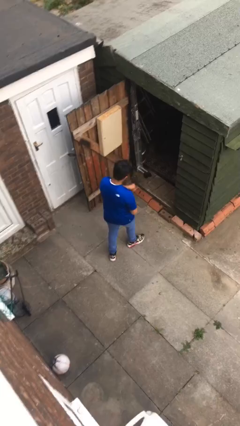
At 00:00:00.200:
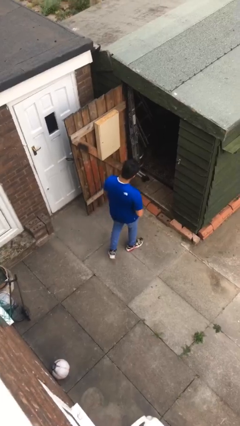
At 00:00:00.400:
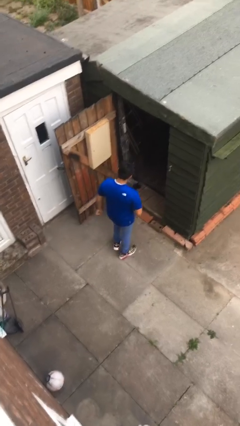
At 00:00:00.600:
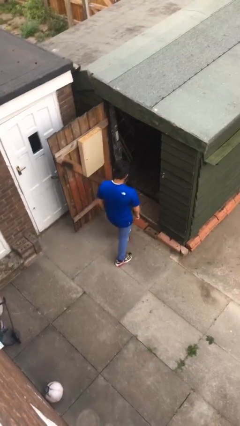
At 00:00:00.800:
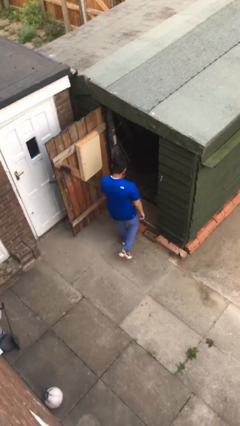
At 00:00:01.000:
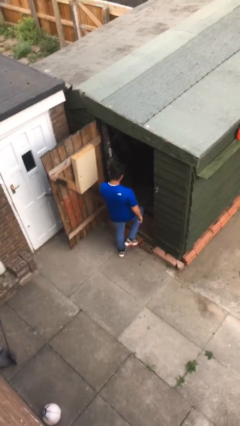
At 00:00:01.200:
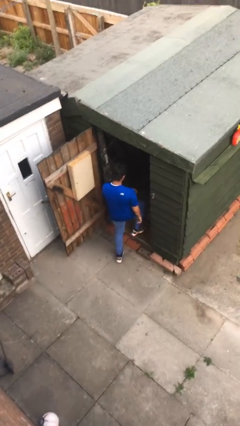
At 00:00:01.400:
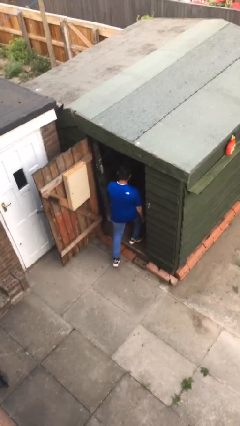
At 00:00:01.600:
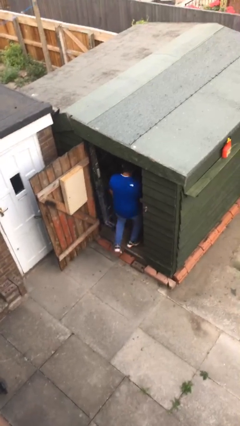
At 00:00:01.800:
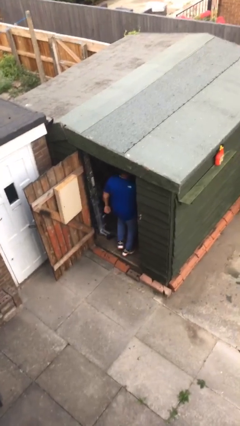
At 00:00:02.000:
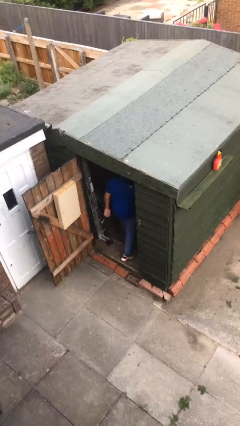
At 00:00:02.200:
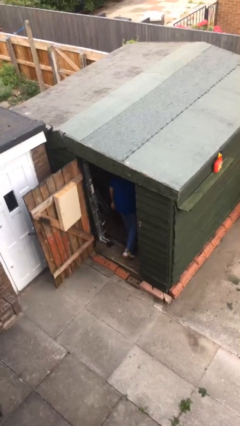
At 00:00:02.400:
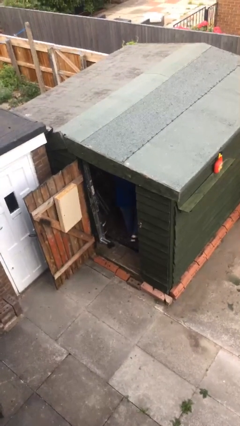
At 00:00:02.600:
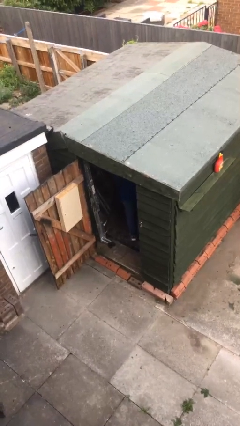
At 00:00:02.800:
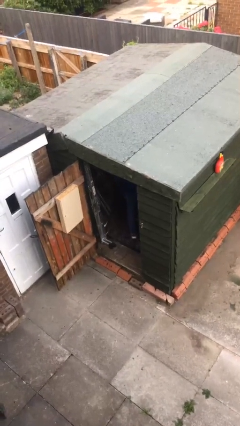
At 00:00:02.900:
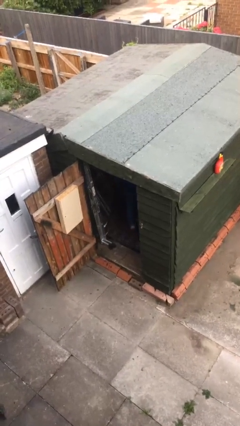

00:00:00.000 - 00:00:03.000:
person exits scene through structure

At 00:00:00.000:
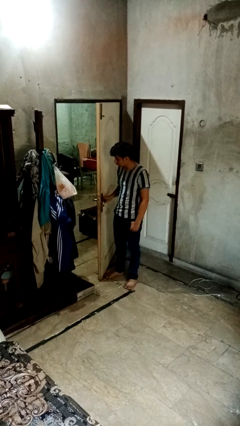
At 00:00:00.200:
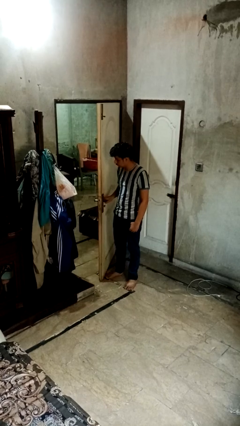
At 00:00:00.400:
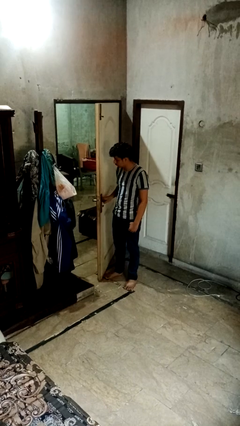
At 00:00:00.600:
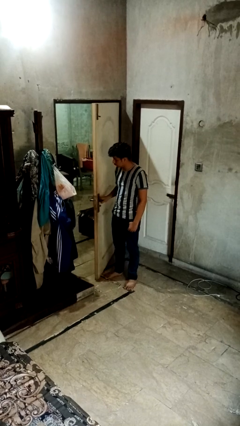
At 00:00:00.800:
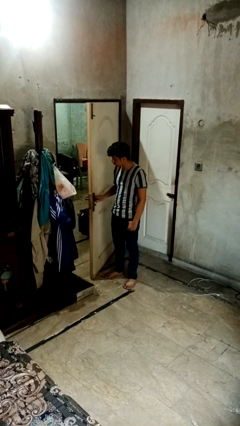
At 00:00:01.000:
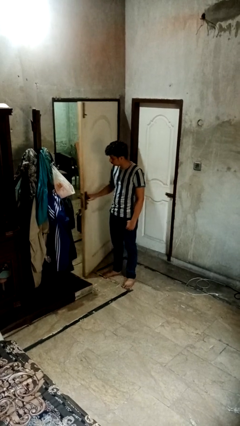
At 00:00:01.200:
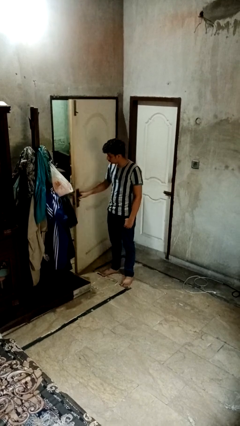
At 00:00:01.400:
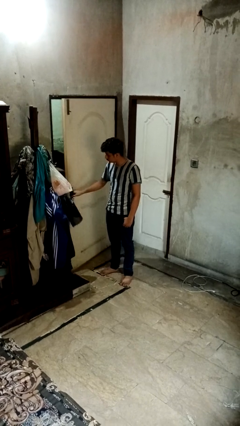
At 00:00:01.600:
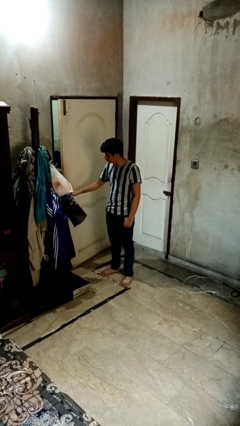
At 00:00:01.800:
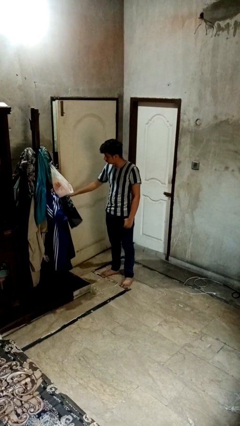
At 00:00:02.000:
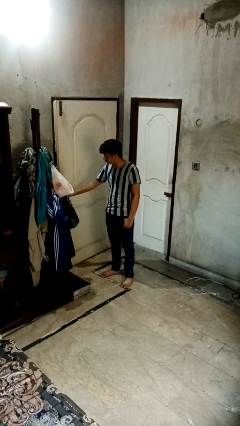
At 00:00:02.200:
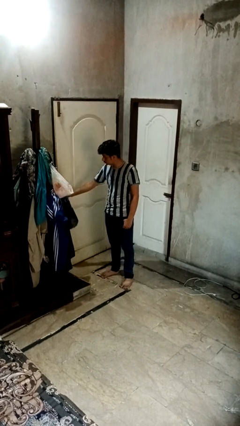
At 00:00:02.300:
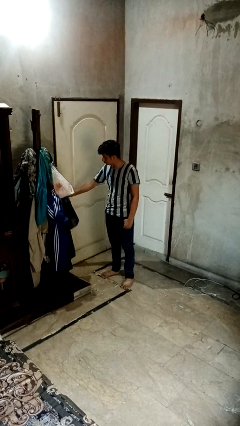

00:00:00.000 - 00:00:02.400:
person closes sliding door

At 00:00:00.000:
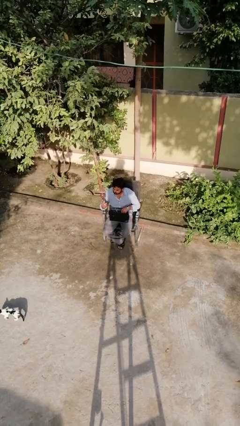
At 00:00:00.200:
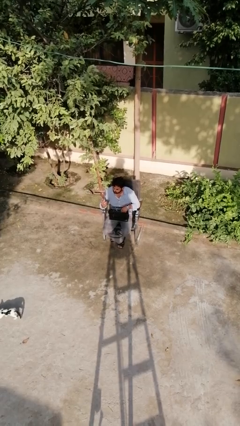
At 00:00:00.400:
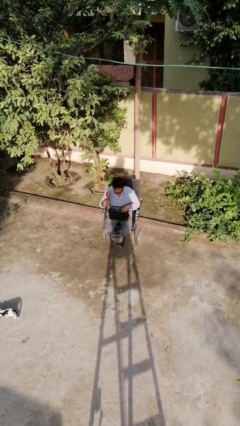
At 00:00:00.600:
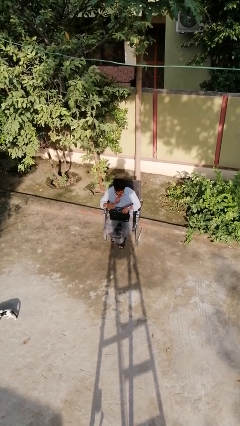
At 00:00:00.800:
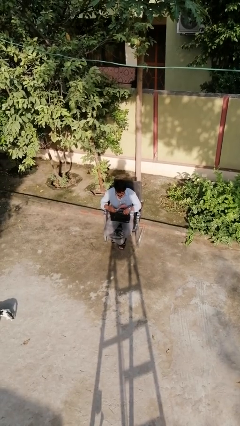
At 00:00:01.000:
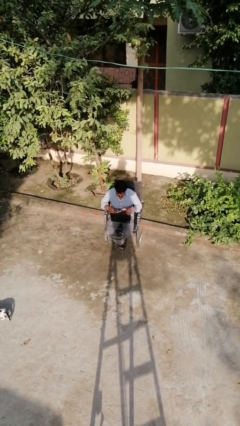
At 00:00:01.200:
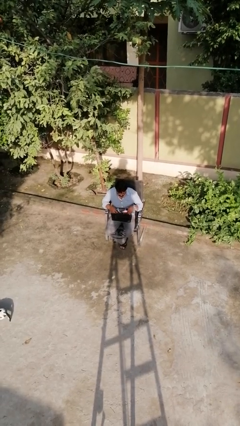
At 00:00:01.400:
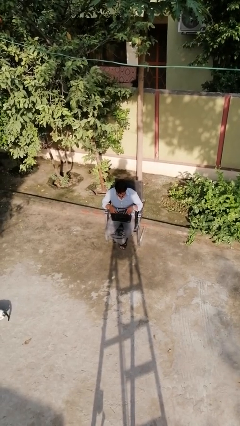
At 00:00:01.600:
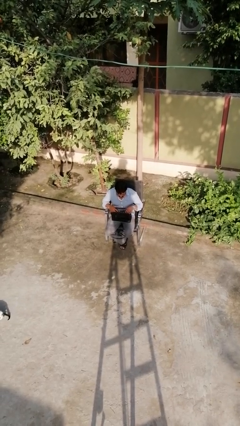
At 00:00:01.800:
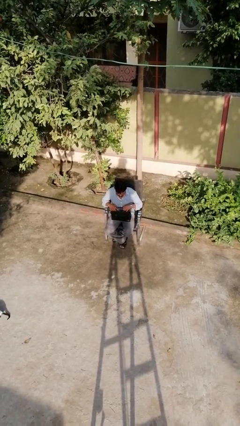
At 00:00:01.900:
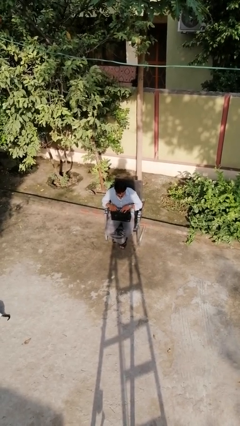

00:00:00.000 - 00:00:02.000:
person puts object into backpack

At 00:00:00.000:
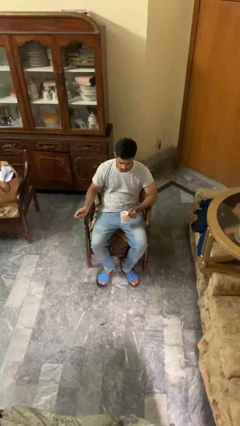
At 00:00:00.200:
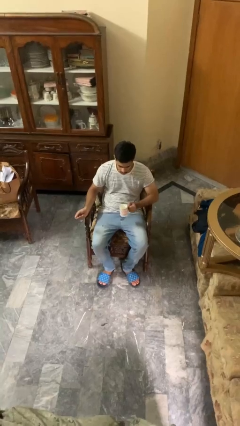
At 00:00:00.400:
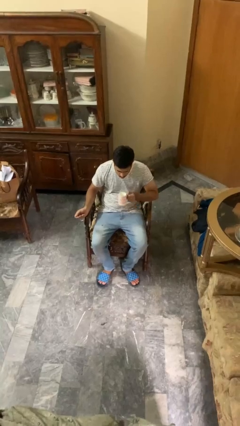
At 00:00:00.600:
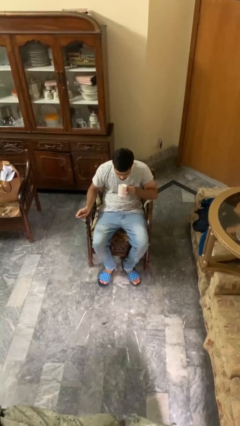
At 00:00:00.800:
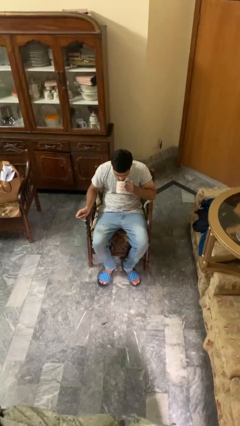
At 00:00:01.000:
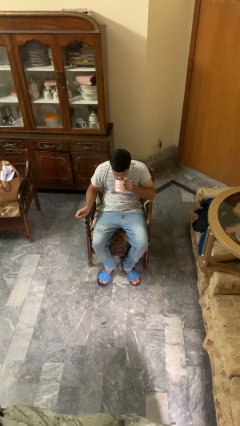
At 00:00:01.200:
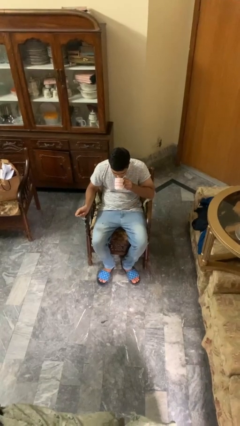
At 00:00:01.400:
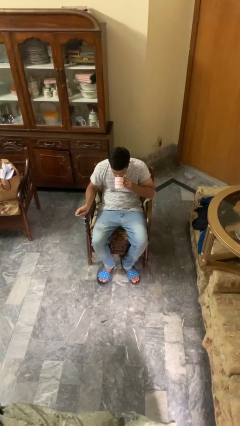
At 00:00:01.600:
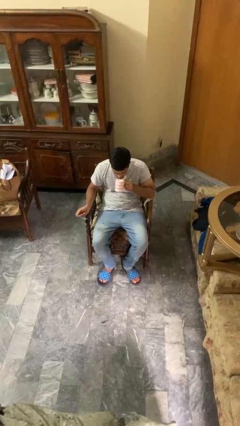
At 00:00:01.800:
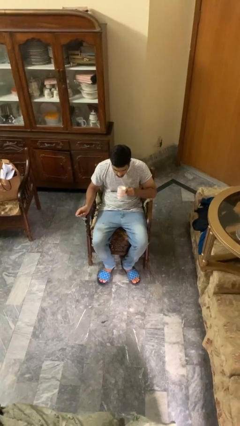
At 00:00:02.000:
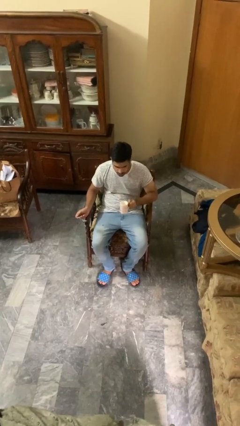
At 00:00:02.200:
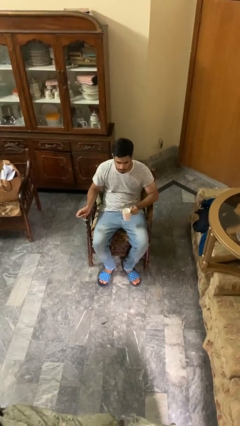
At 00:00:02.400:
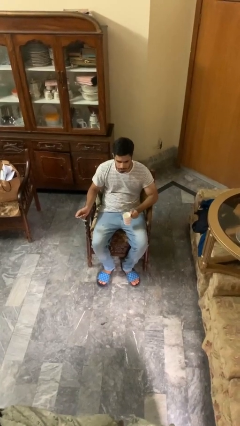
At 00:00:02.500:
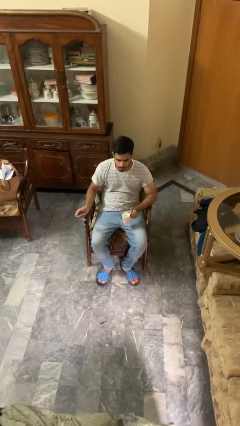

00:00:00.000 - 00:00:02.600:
person drinks from mug

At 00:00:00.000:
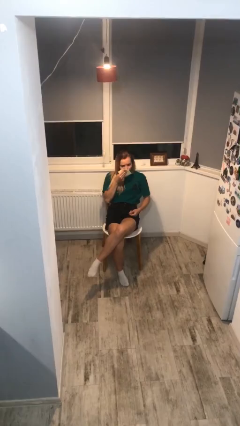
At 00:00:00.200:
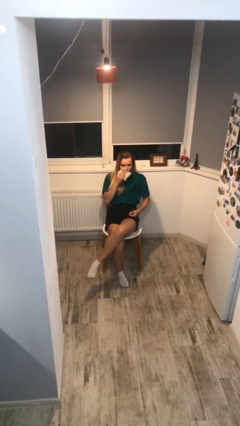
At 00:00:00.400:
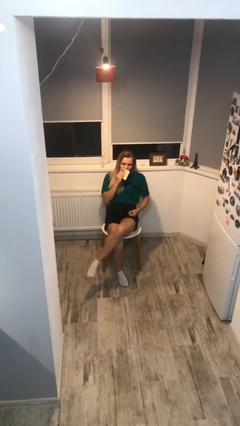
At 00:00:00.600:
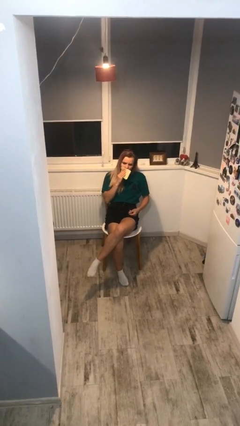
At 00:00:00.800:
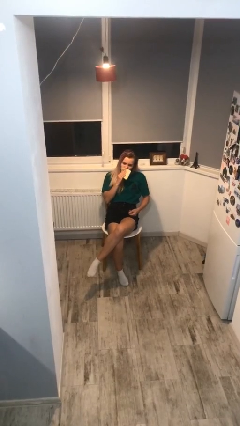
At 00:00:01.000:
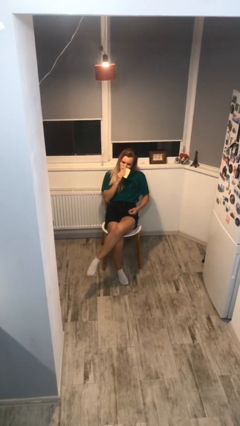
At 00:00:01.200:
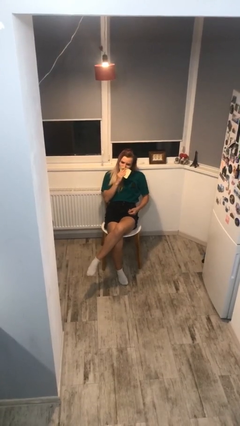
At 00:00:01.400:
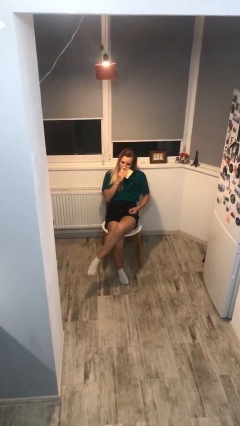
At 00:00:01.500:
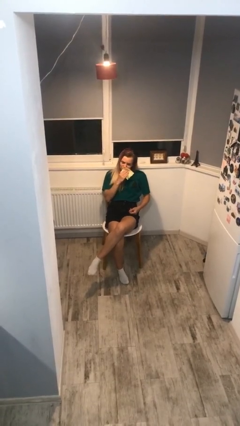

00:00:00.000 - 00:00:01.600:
person wipes mouth with napkin

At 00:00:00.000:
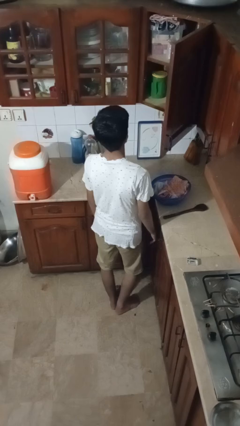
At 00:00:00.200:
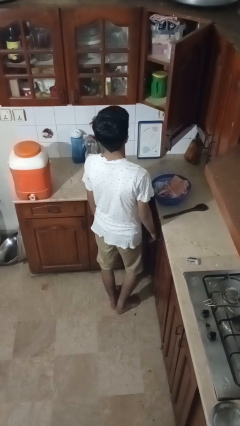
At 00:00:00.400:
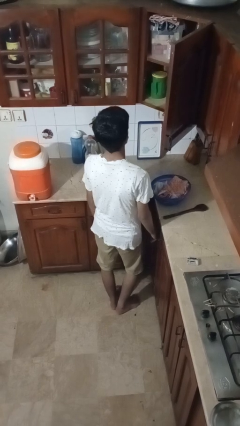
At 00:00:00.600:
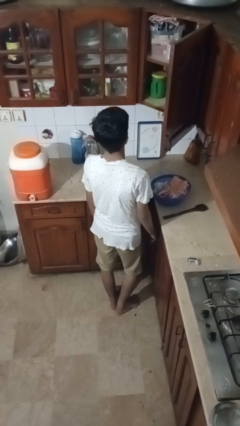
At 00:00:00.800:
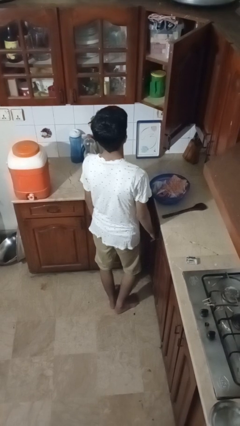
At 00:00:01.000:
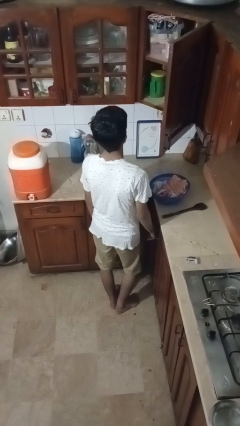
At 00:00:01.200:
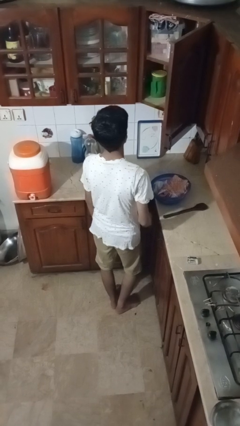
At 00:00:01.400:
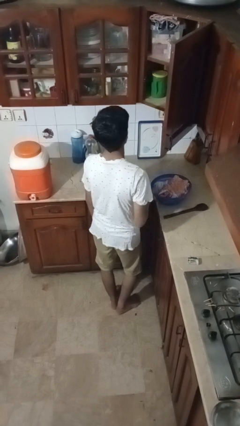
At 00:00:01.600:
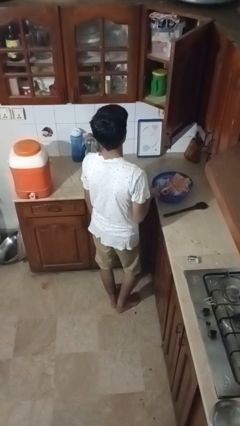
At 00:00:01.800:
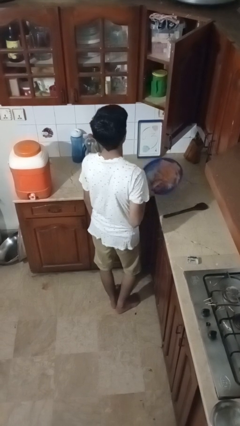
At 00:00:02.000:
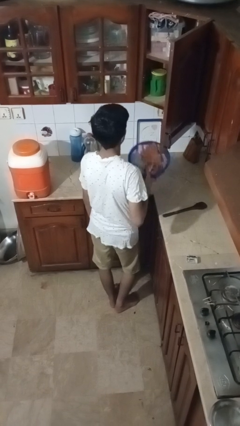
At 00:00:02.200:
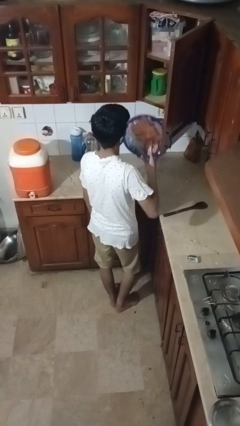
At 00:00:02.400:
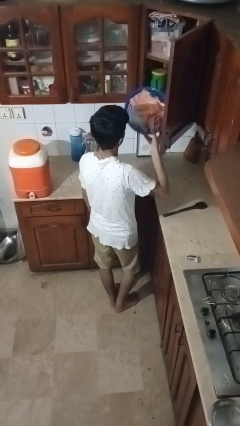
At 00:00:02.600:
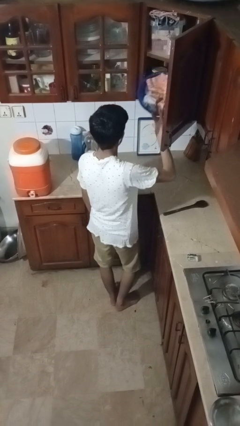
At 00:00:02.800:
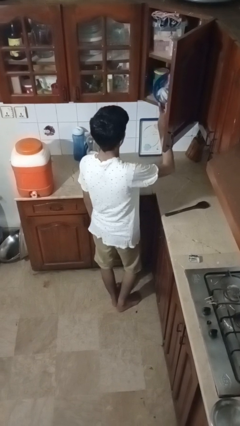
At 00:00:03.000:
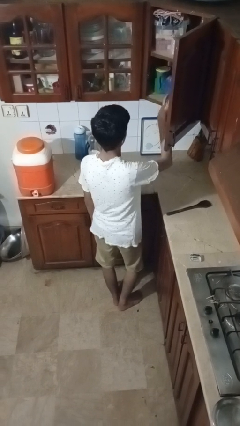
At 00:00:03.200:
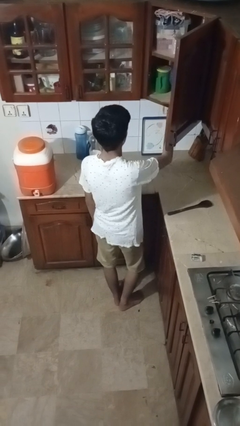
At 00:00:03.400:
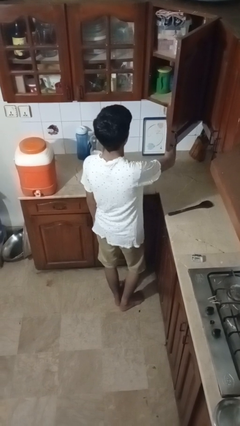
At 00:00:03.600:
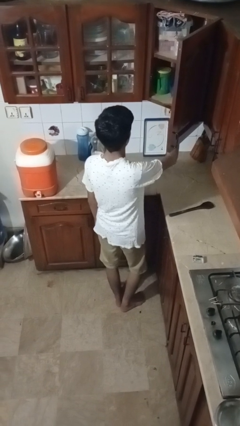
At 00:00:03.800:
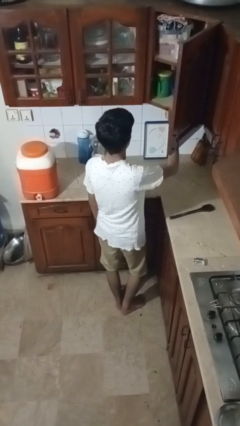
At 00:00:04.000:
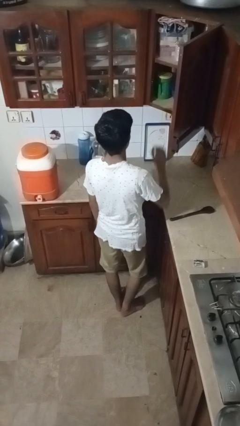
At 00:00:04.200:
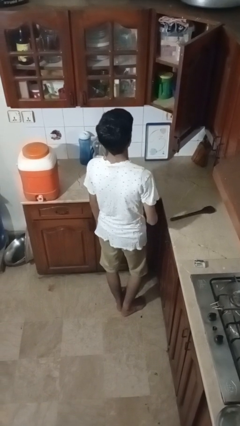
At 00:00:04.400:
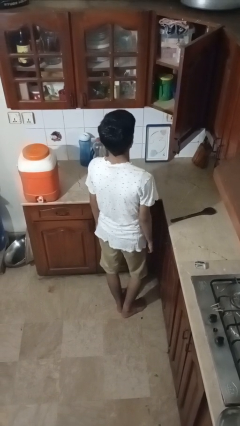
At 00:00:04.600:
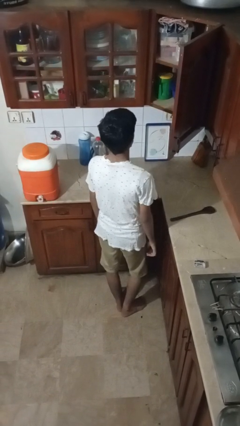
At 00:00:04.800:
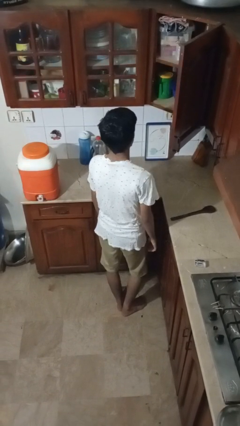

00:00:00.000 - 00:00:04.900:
person puts object in cabinet

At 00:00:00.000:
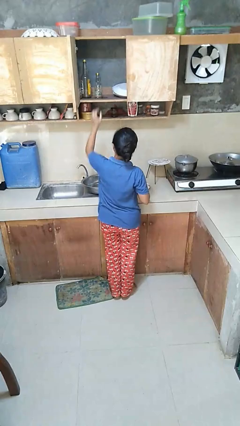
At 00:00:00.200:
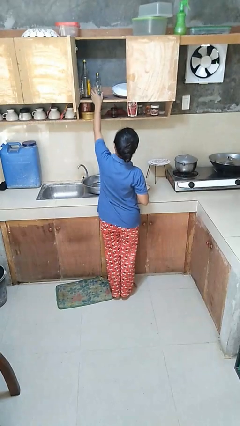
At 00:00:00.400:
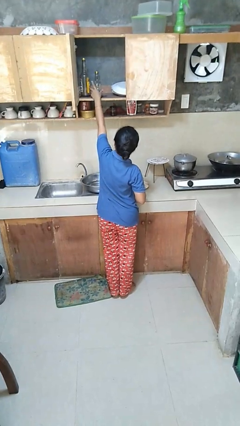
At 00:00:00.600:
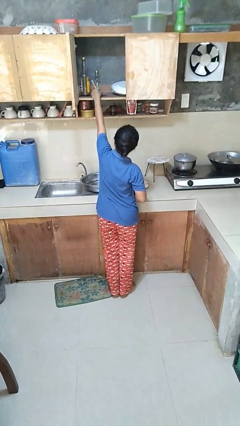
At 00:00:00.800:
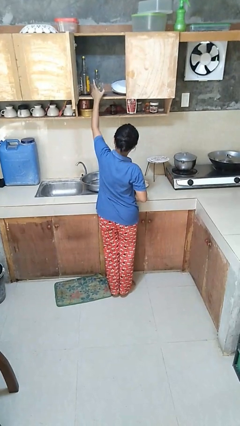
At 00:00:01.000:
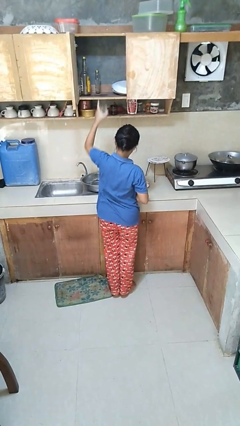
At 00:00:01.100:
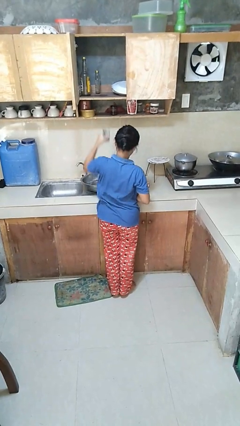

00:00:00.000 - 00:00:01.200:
person takes object from cabinet
